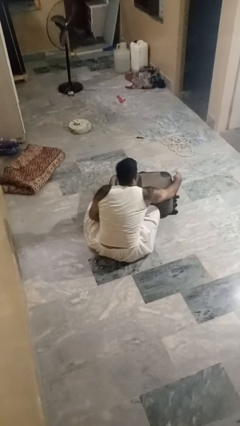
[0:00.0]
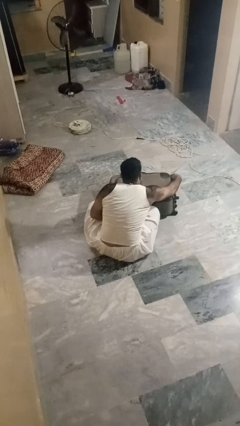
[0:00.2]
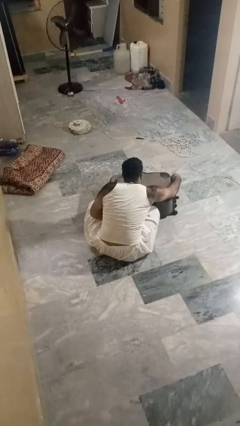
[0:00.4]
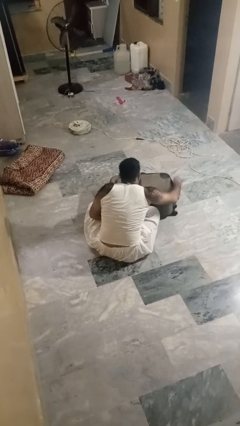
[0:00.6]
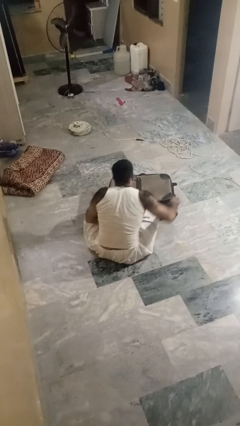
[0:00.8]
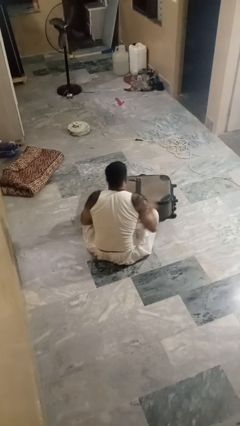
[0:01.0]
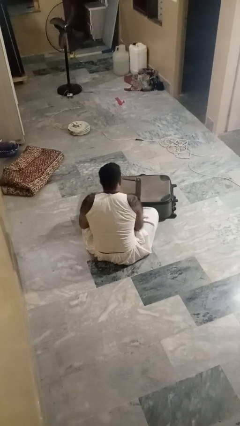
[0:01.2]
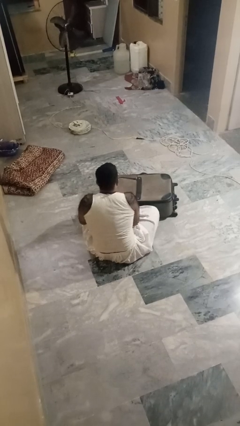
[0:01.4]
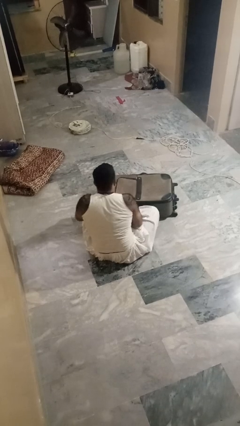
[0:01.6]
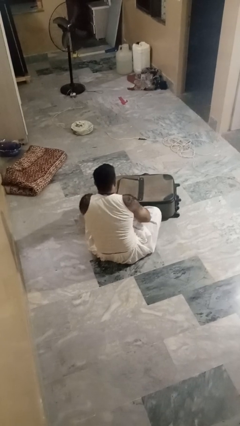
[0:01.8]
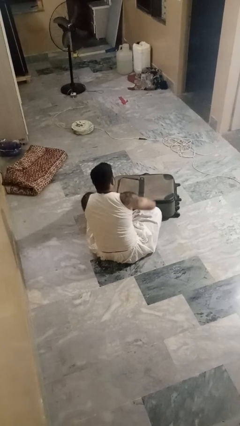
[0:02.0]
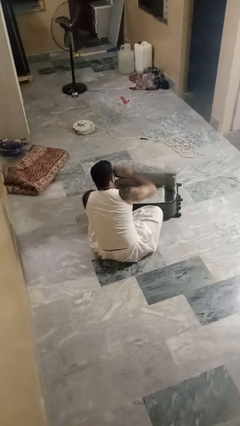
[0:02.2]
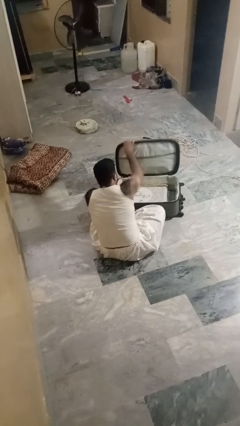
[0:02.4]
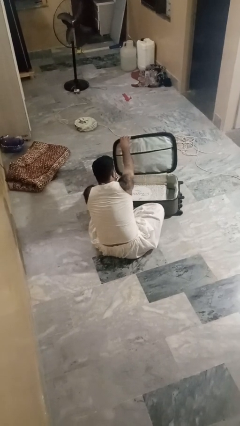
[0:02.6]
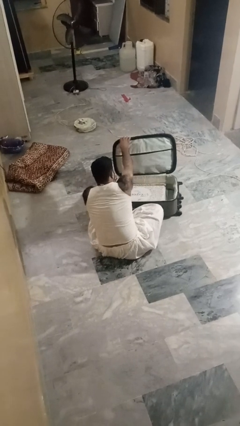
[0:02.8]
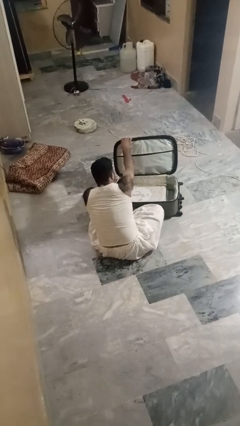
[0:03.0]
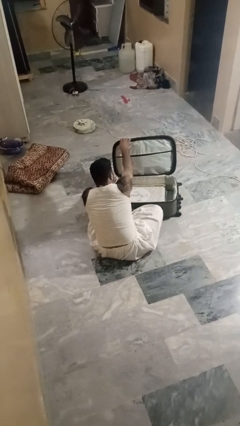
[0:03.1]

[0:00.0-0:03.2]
person opens suitcase

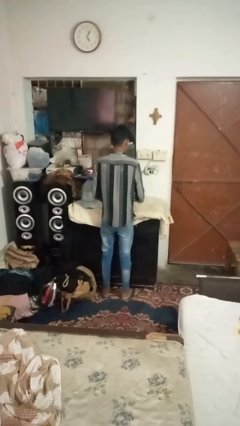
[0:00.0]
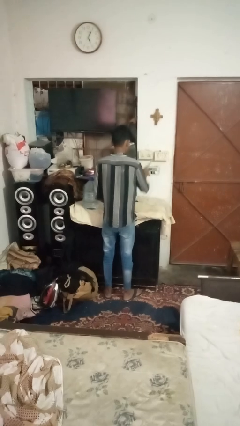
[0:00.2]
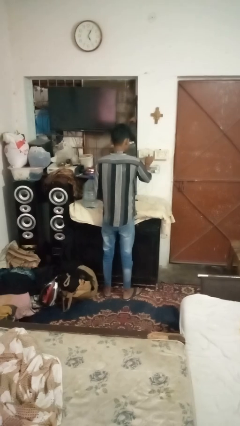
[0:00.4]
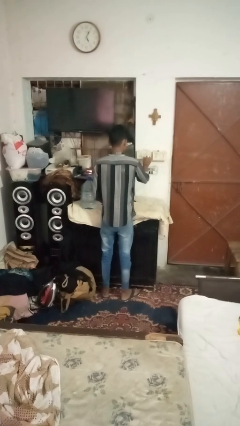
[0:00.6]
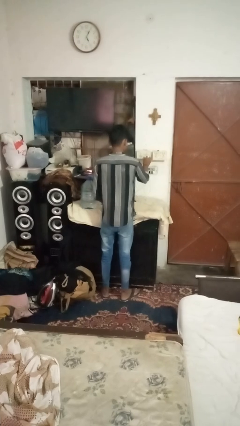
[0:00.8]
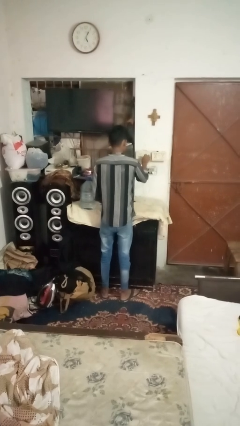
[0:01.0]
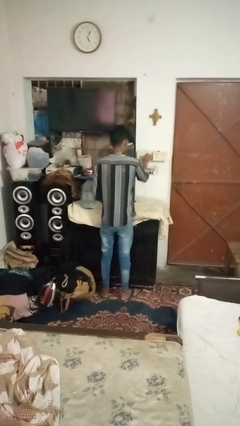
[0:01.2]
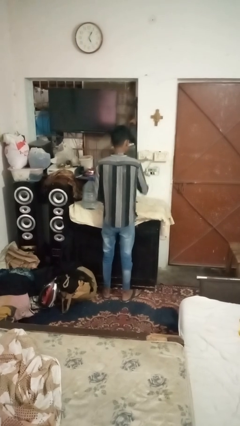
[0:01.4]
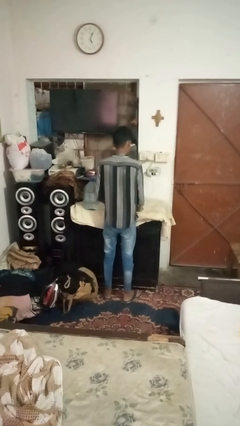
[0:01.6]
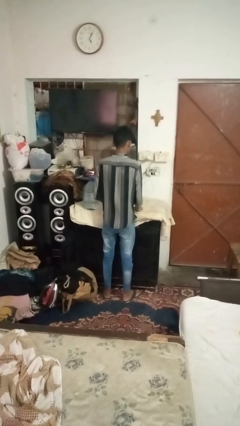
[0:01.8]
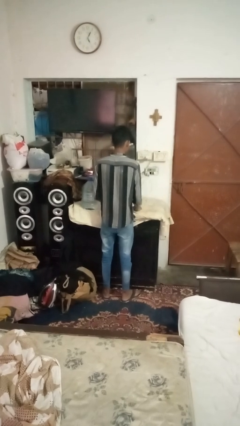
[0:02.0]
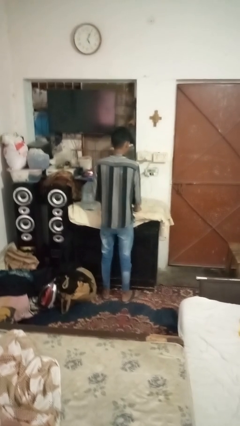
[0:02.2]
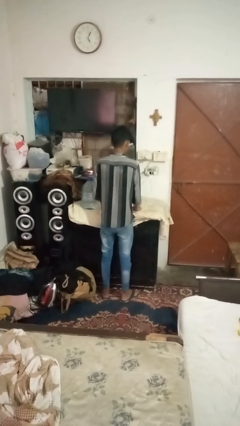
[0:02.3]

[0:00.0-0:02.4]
person plugs into electrical socket

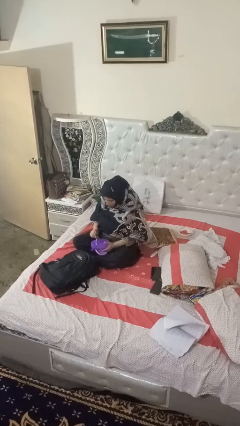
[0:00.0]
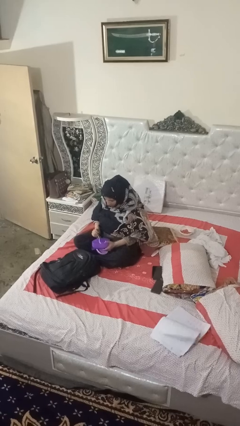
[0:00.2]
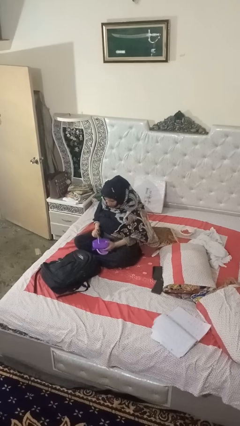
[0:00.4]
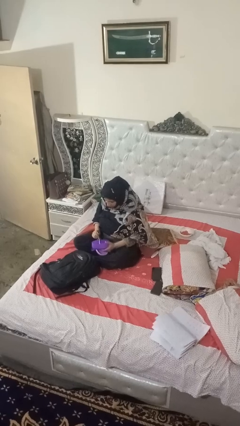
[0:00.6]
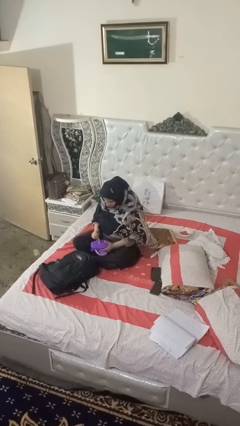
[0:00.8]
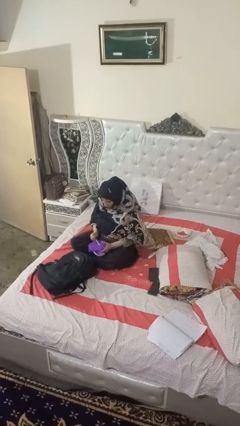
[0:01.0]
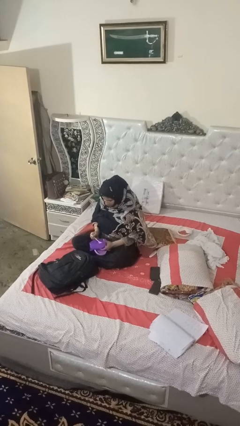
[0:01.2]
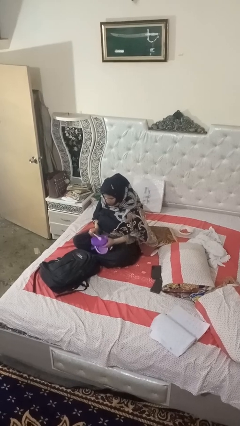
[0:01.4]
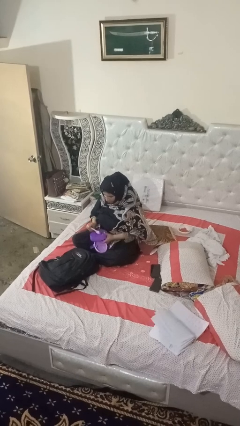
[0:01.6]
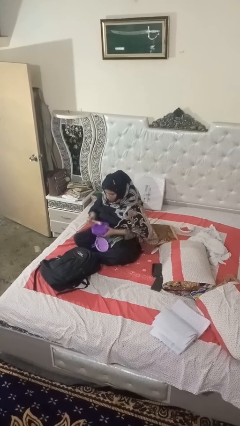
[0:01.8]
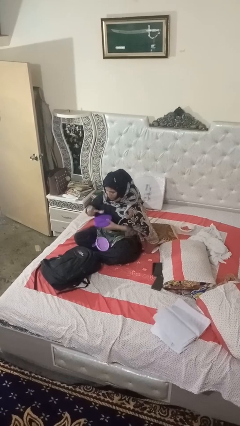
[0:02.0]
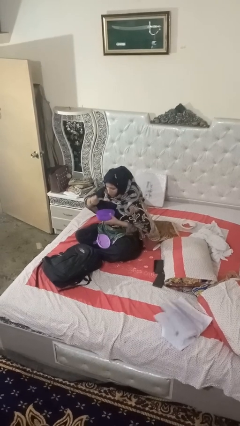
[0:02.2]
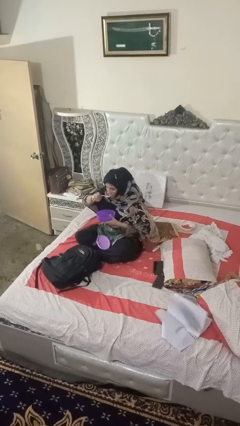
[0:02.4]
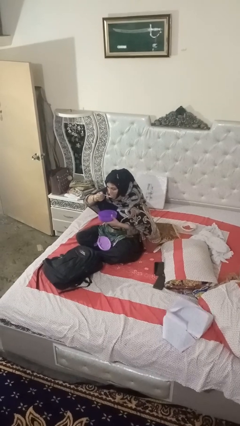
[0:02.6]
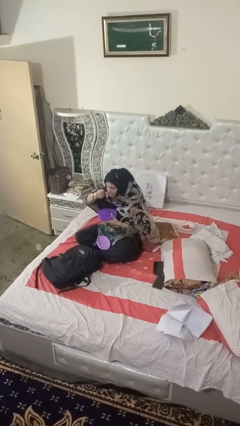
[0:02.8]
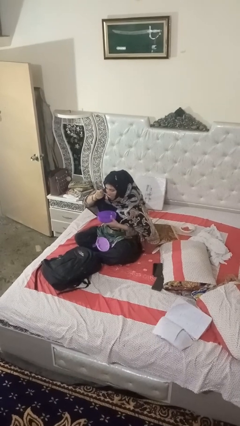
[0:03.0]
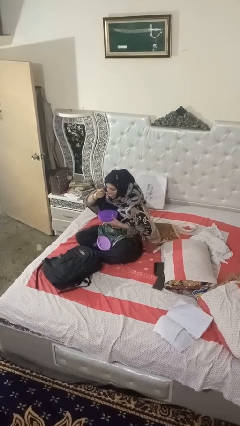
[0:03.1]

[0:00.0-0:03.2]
person eats snack from bag

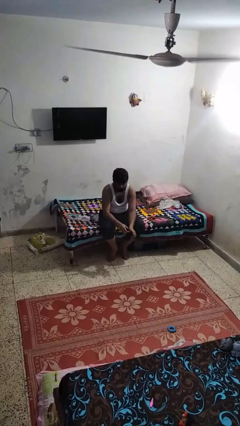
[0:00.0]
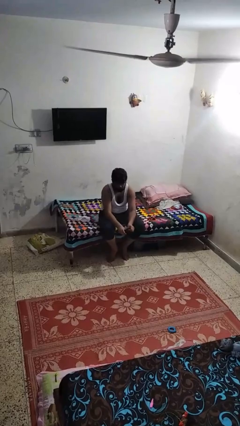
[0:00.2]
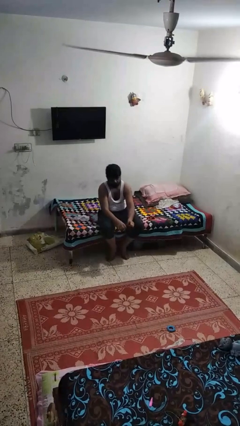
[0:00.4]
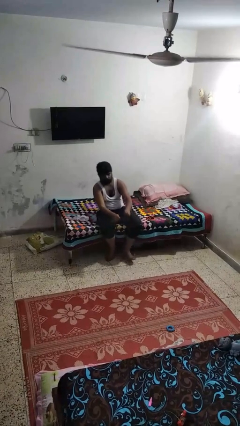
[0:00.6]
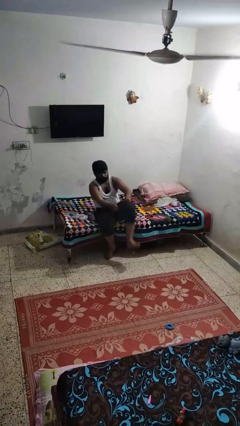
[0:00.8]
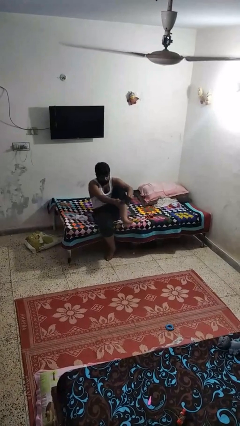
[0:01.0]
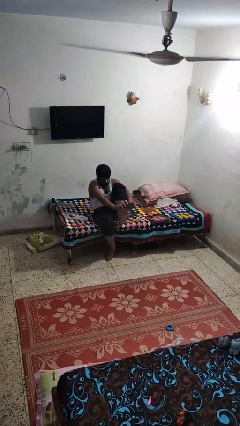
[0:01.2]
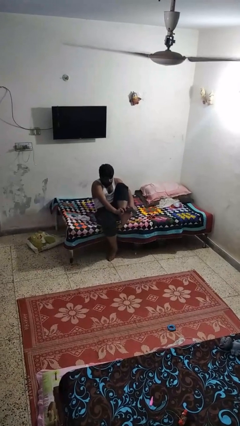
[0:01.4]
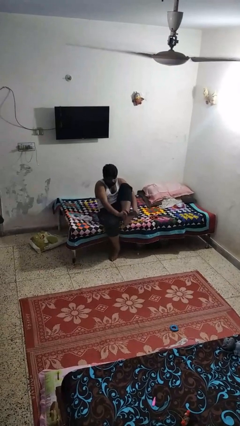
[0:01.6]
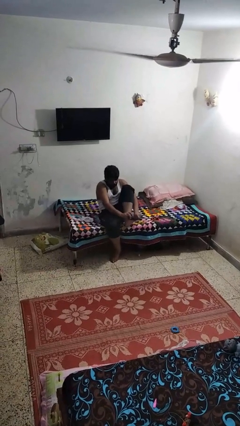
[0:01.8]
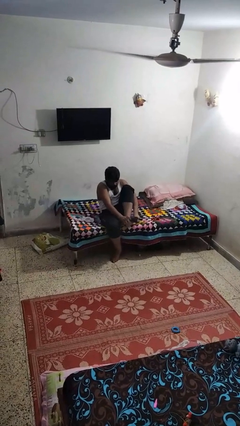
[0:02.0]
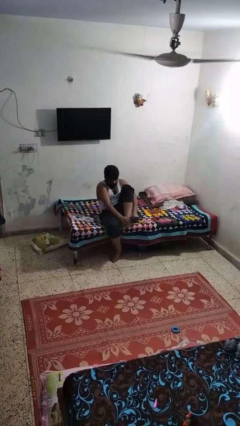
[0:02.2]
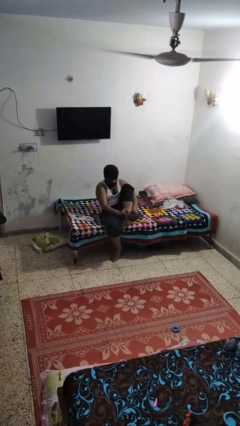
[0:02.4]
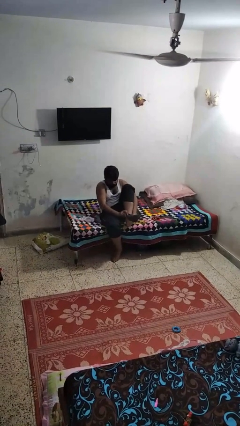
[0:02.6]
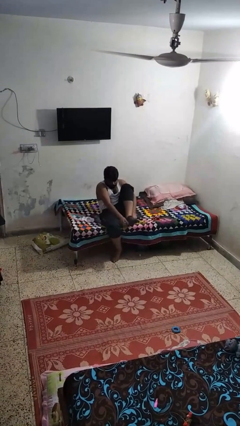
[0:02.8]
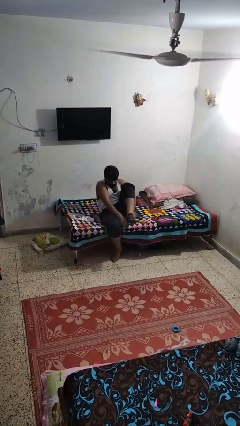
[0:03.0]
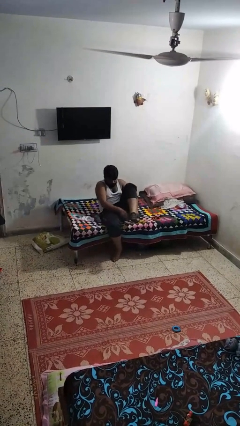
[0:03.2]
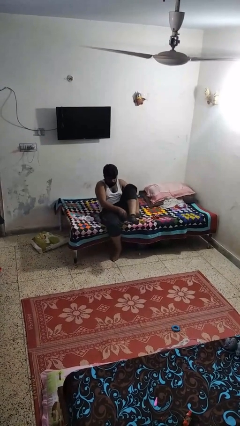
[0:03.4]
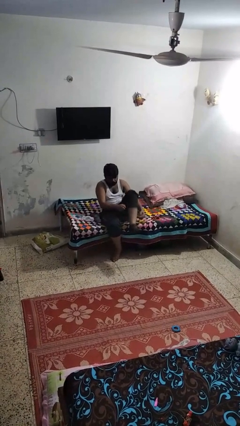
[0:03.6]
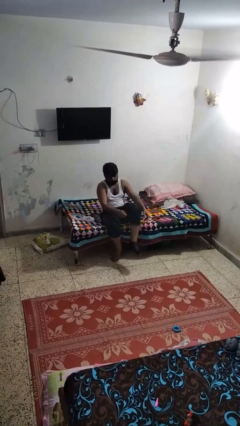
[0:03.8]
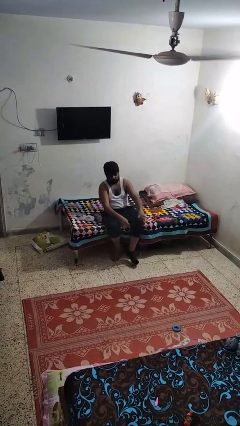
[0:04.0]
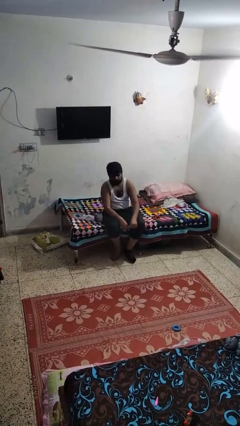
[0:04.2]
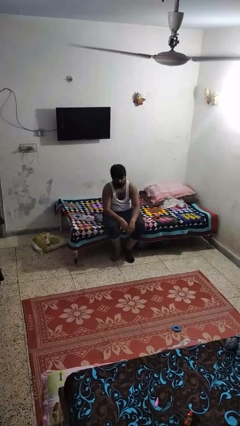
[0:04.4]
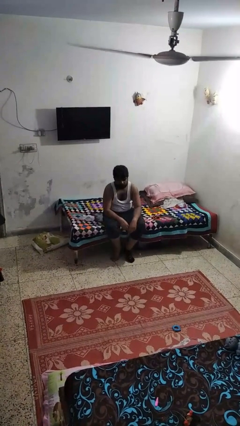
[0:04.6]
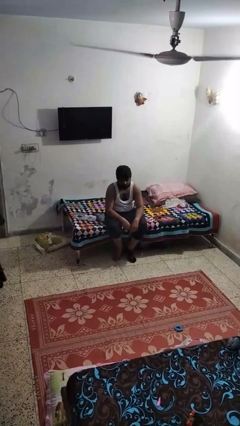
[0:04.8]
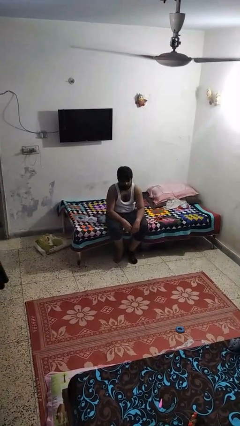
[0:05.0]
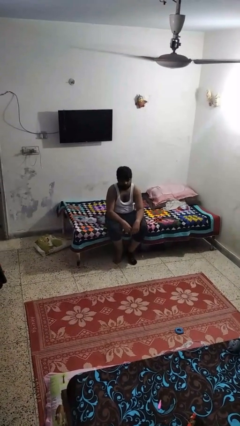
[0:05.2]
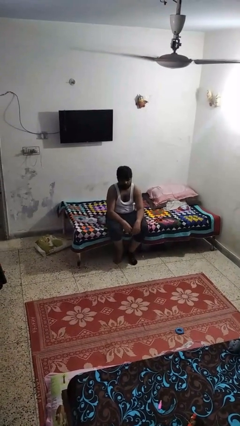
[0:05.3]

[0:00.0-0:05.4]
person puts on socks

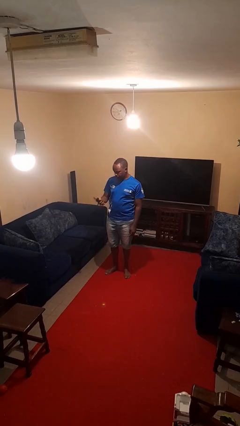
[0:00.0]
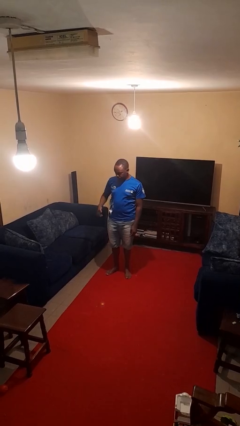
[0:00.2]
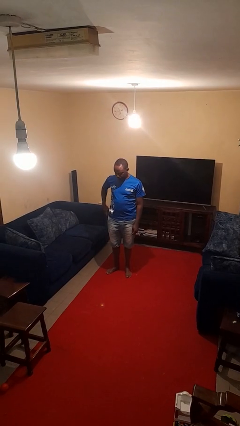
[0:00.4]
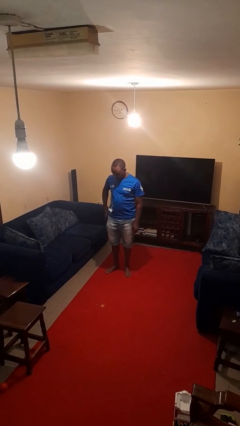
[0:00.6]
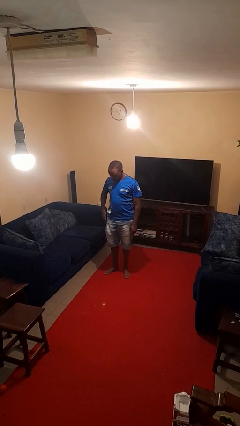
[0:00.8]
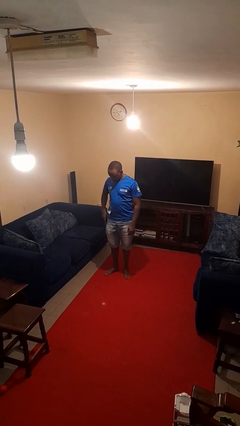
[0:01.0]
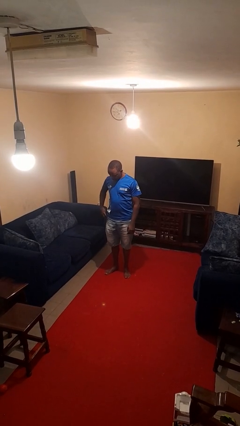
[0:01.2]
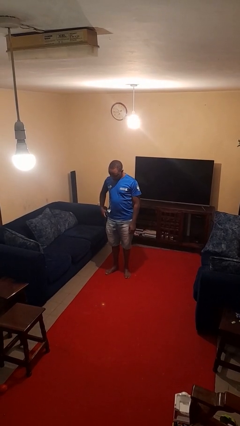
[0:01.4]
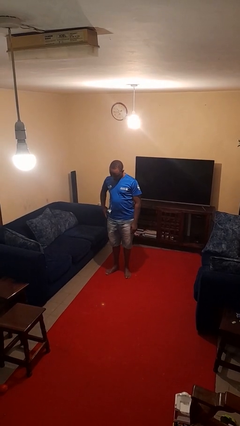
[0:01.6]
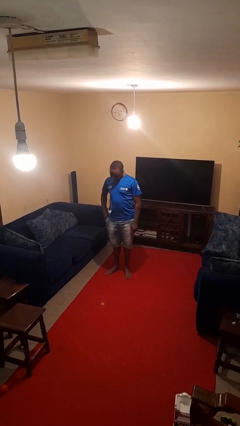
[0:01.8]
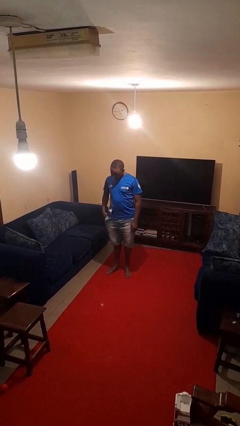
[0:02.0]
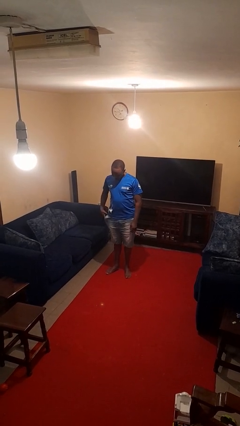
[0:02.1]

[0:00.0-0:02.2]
person puts phone into pocket

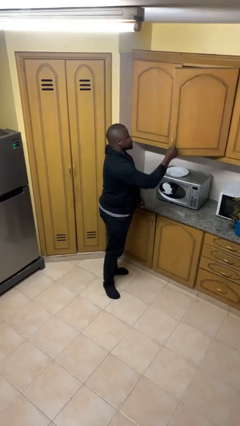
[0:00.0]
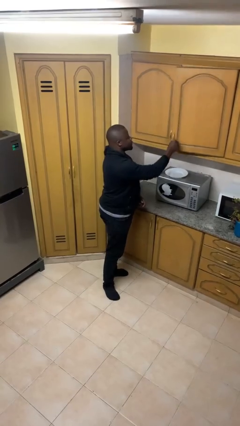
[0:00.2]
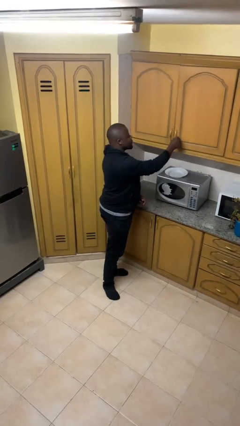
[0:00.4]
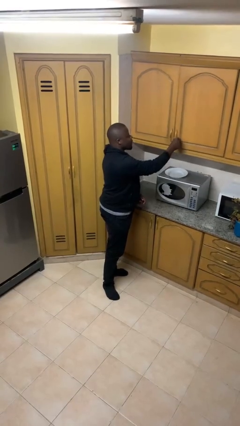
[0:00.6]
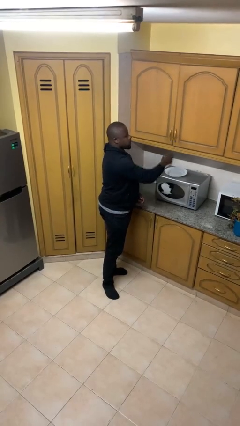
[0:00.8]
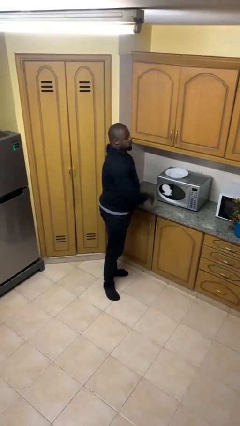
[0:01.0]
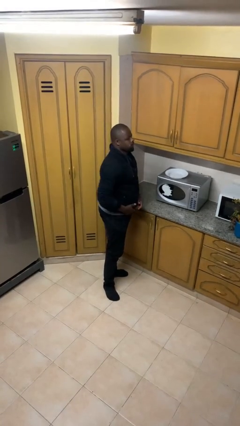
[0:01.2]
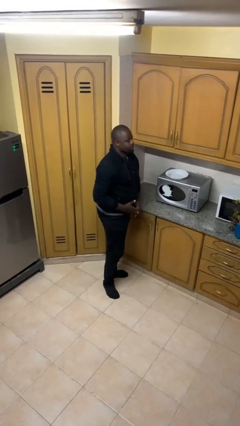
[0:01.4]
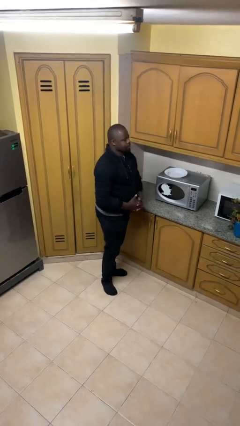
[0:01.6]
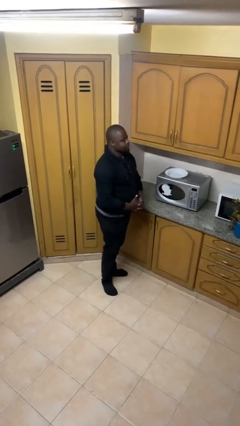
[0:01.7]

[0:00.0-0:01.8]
person closes cabinet
